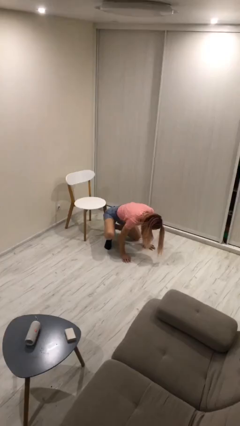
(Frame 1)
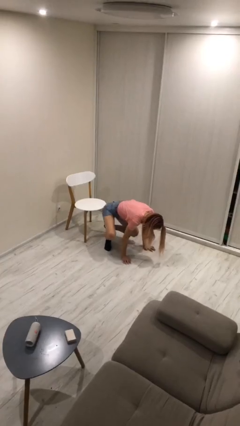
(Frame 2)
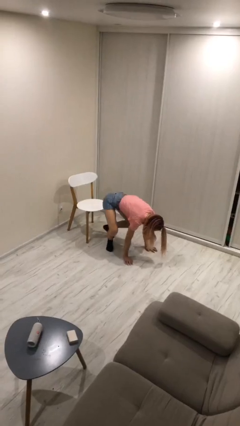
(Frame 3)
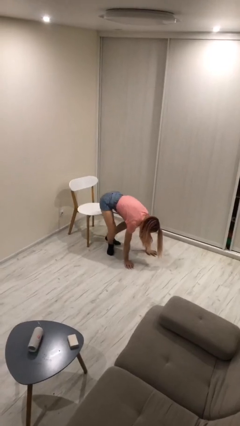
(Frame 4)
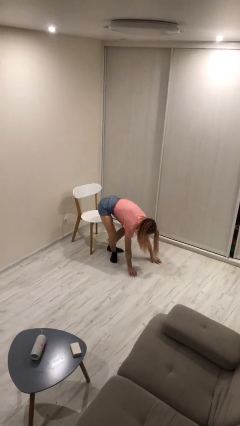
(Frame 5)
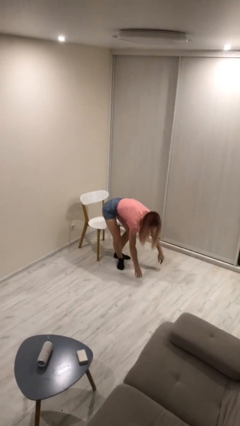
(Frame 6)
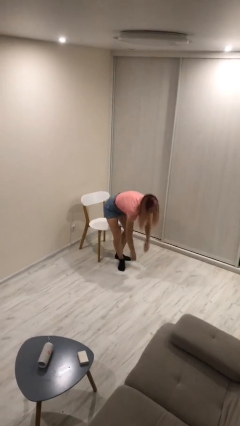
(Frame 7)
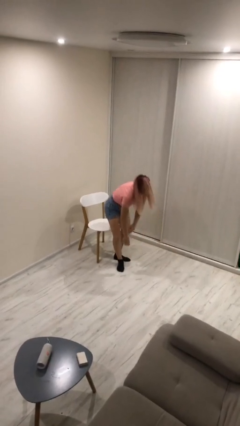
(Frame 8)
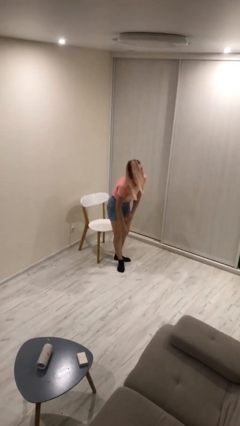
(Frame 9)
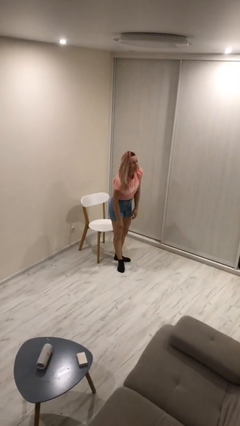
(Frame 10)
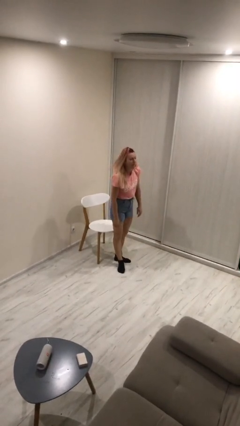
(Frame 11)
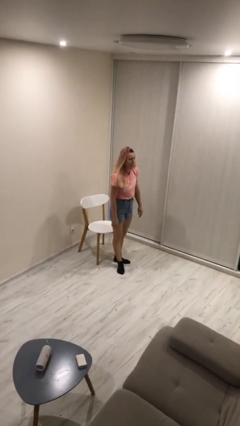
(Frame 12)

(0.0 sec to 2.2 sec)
person stands up from floor

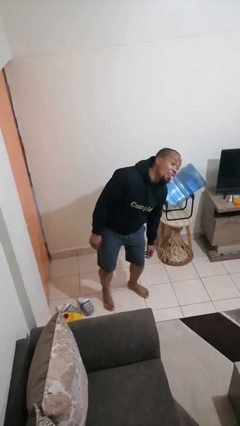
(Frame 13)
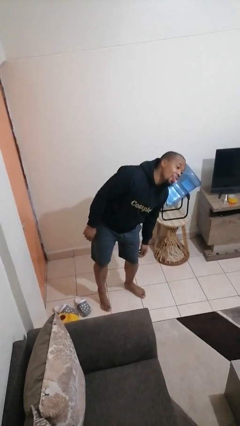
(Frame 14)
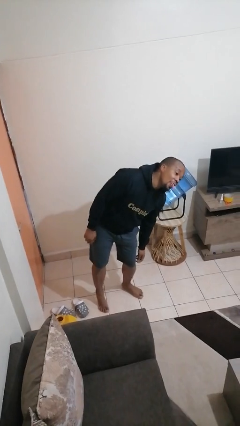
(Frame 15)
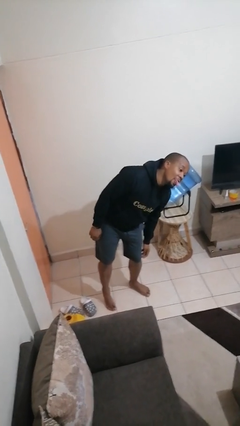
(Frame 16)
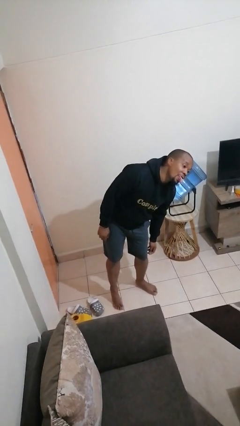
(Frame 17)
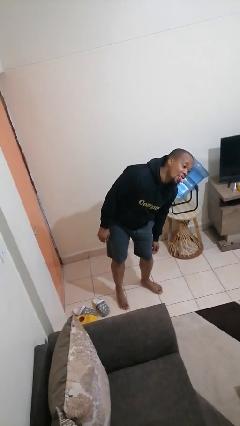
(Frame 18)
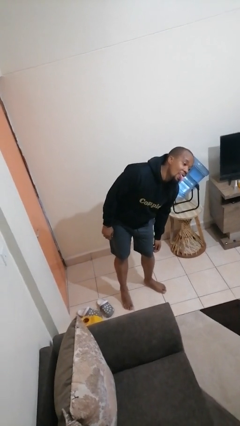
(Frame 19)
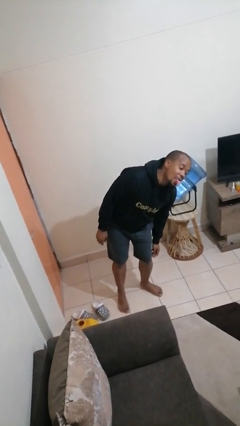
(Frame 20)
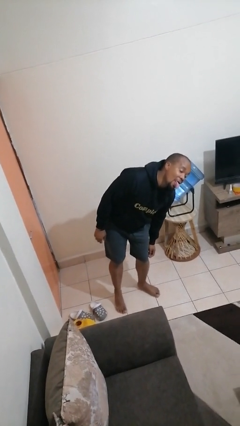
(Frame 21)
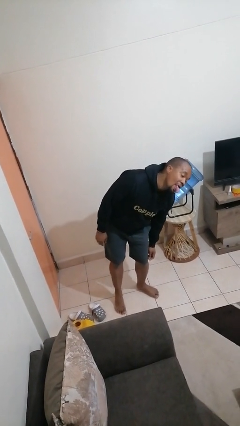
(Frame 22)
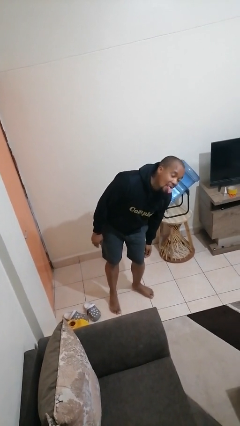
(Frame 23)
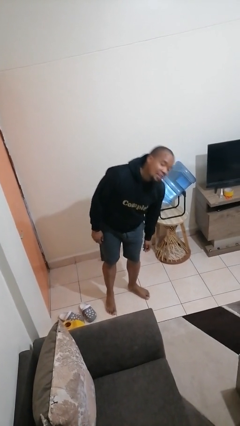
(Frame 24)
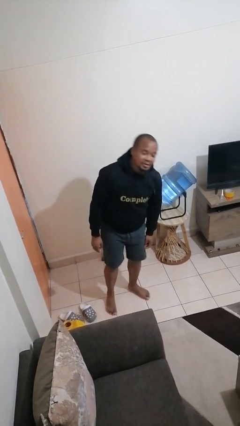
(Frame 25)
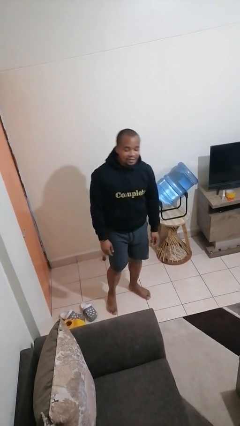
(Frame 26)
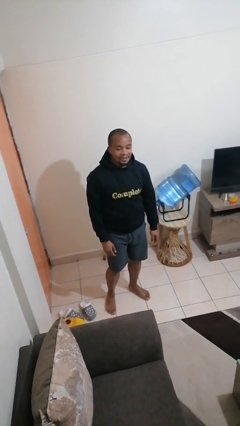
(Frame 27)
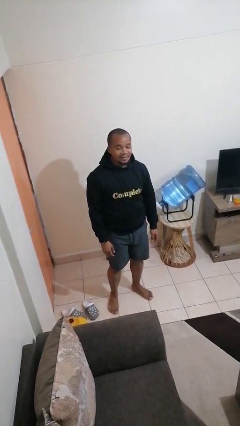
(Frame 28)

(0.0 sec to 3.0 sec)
person sticks out tongue

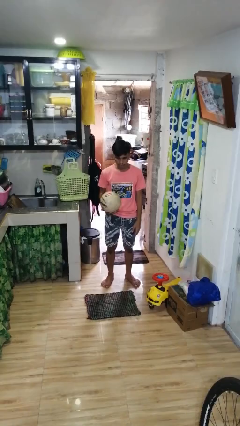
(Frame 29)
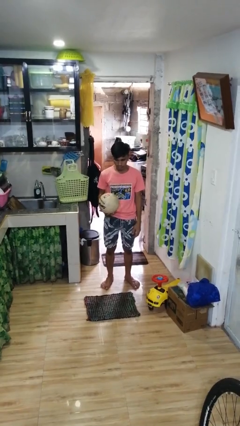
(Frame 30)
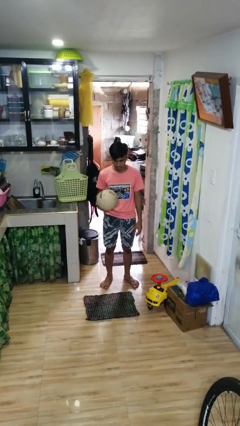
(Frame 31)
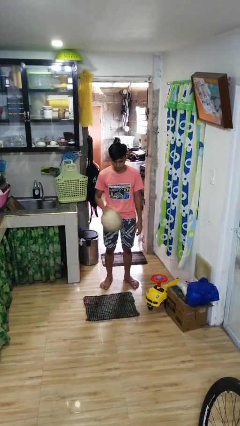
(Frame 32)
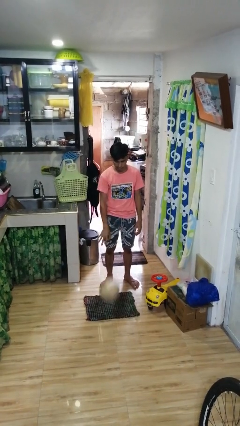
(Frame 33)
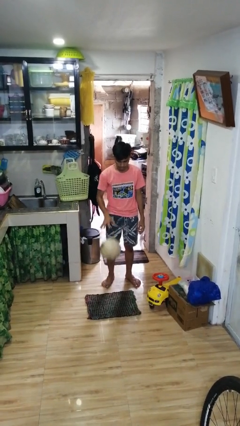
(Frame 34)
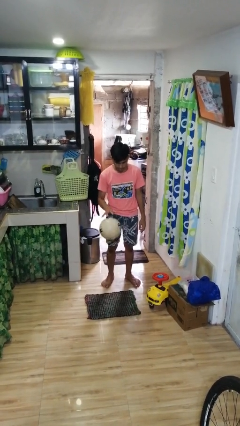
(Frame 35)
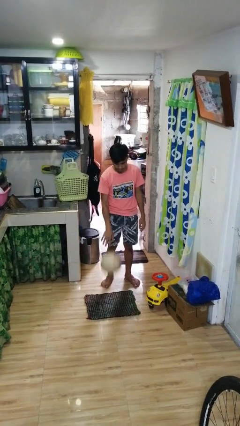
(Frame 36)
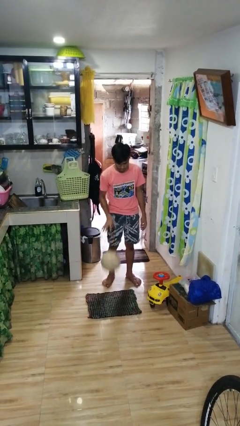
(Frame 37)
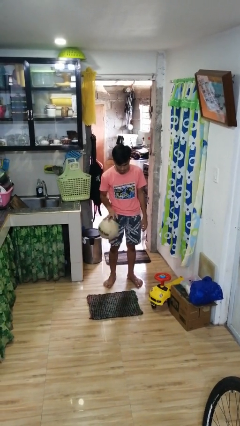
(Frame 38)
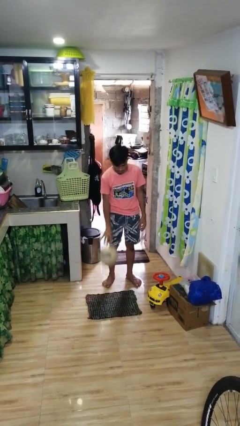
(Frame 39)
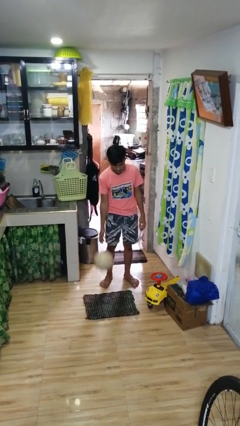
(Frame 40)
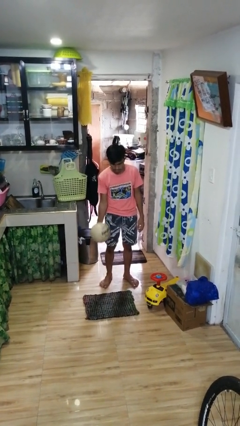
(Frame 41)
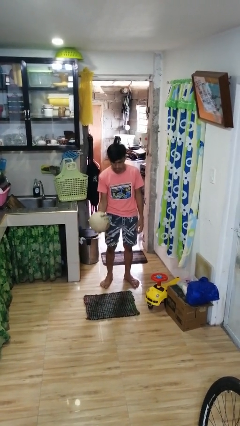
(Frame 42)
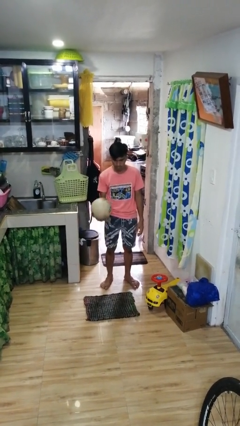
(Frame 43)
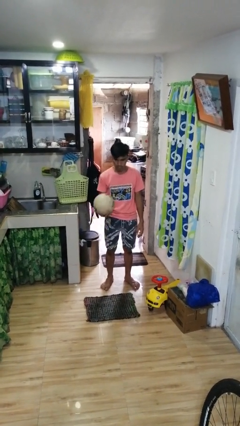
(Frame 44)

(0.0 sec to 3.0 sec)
person bounces ball on floor

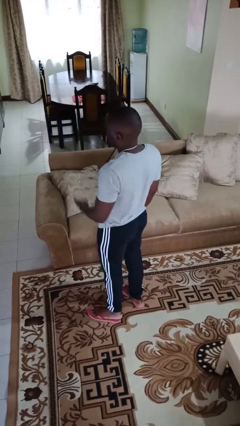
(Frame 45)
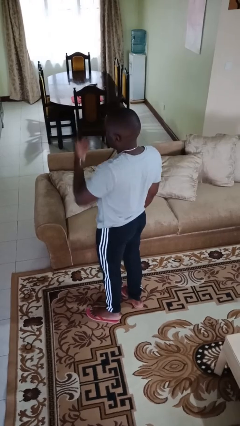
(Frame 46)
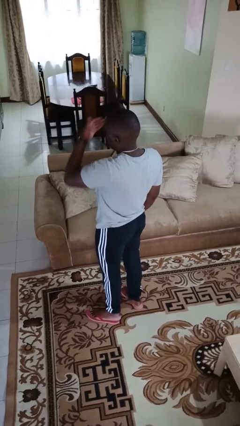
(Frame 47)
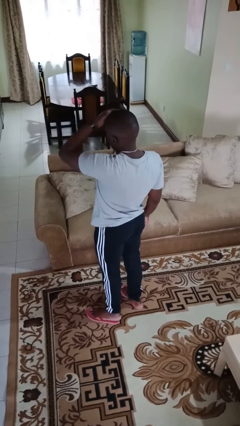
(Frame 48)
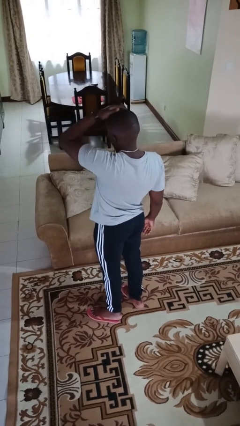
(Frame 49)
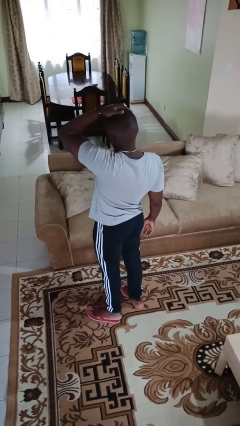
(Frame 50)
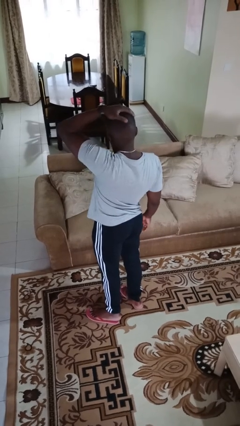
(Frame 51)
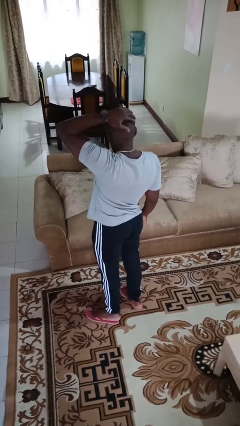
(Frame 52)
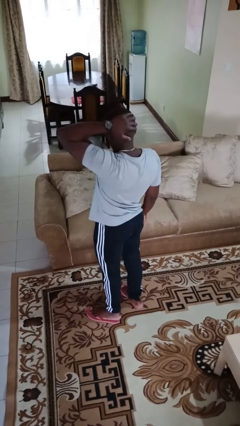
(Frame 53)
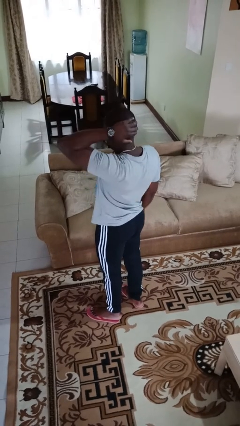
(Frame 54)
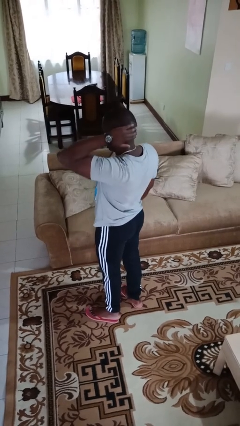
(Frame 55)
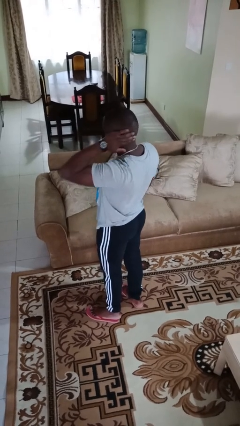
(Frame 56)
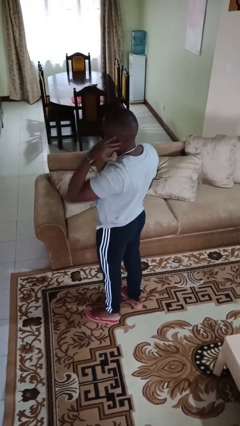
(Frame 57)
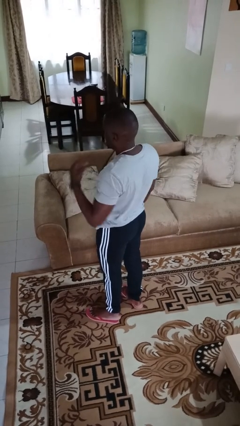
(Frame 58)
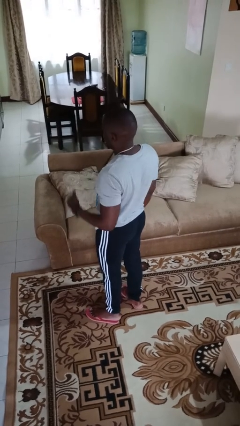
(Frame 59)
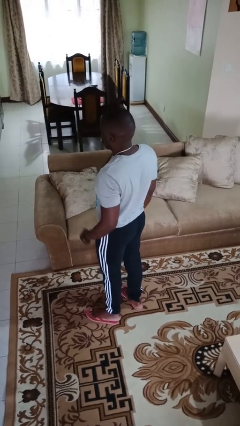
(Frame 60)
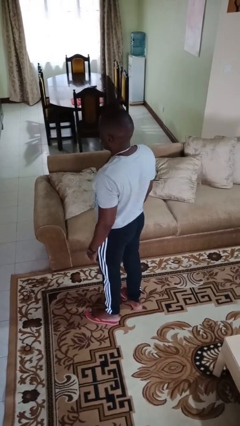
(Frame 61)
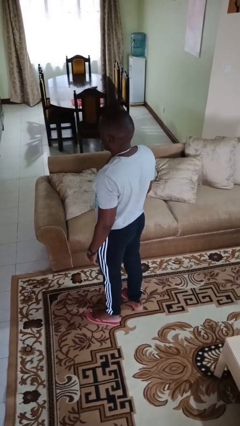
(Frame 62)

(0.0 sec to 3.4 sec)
person strokes hair

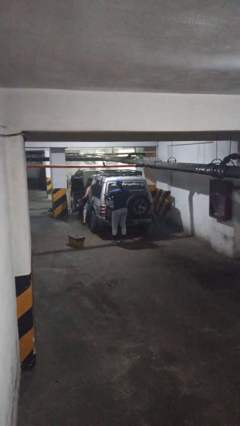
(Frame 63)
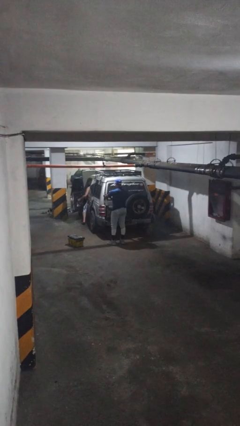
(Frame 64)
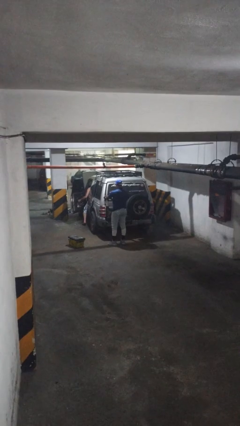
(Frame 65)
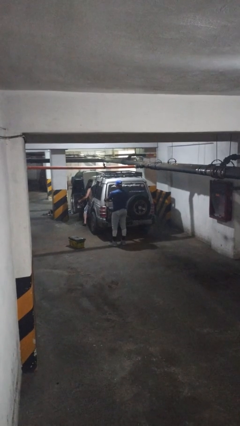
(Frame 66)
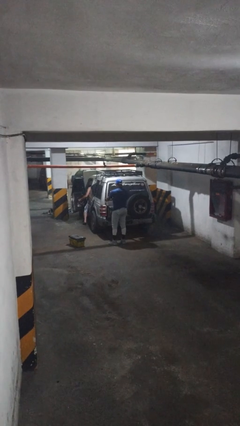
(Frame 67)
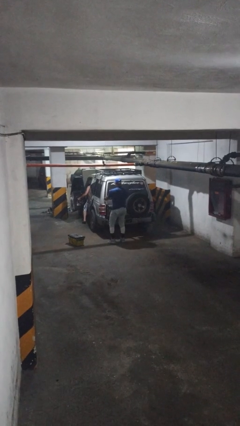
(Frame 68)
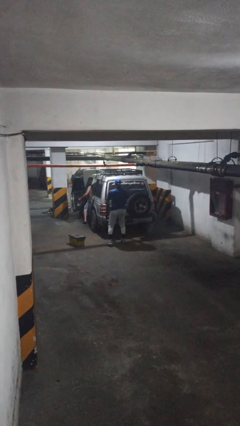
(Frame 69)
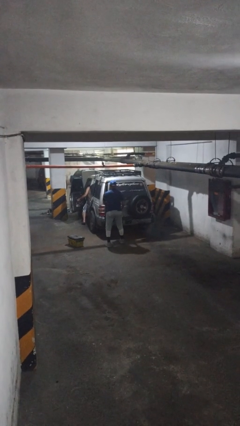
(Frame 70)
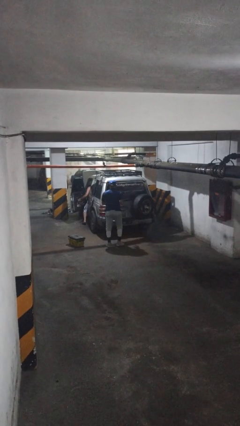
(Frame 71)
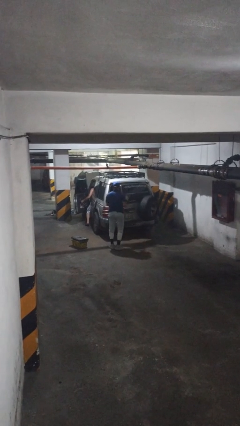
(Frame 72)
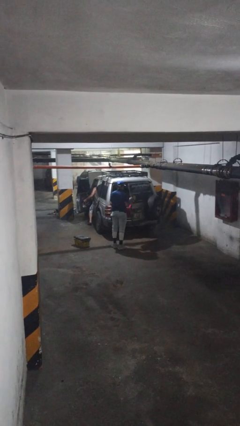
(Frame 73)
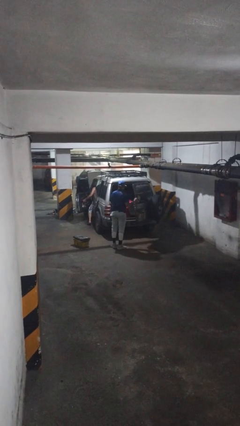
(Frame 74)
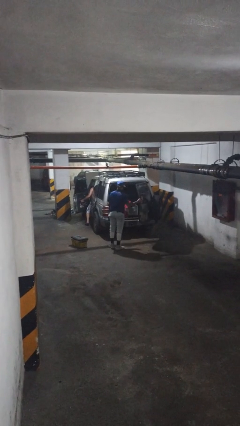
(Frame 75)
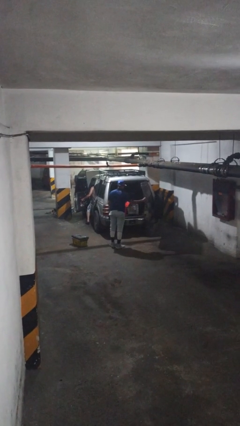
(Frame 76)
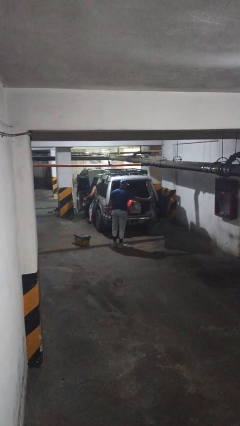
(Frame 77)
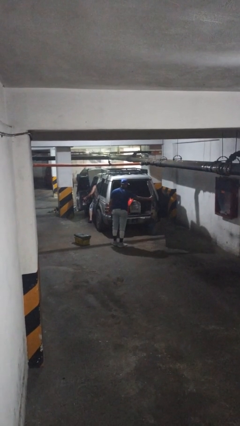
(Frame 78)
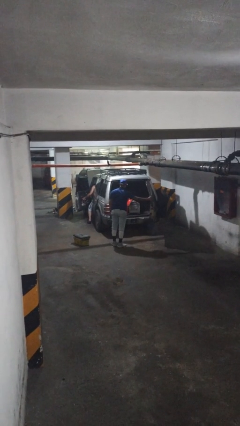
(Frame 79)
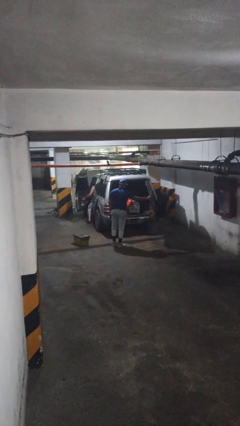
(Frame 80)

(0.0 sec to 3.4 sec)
person opens car trunk

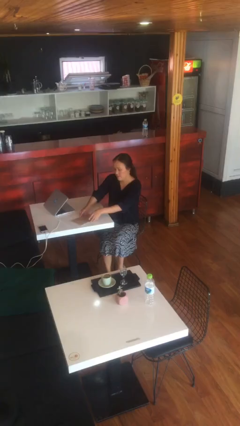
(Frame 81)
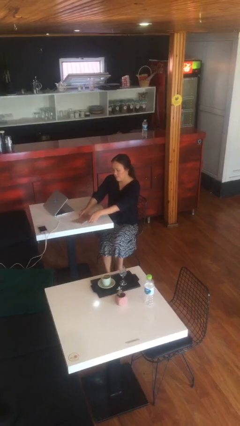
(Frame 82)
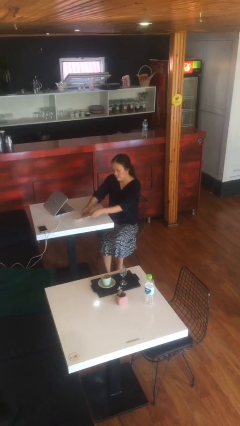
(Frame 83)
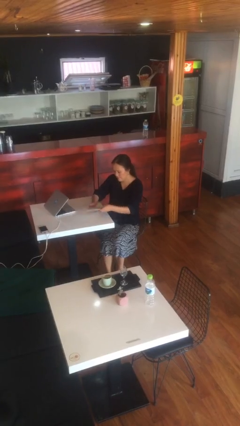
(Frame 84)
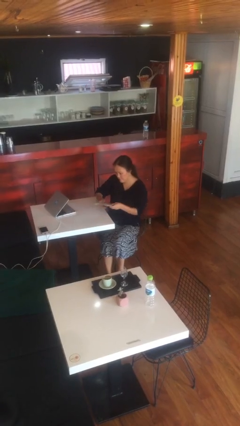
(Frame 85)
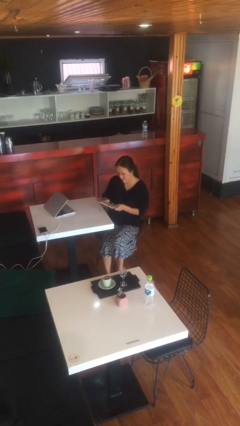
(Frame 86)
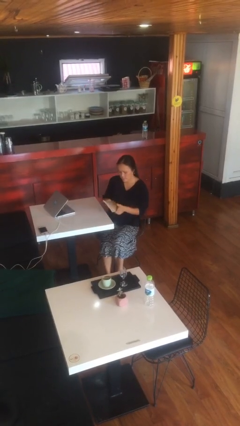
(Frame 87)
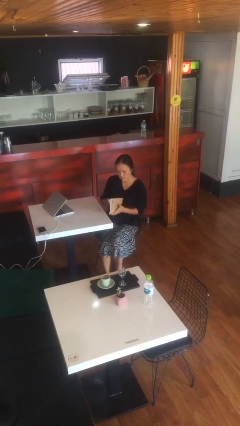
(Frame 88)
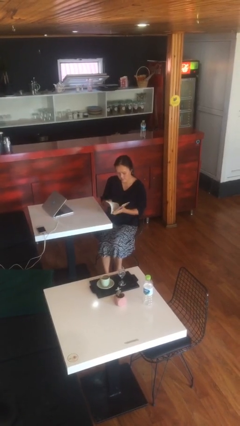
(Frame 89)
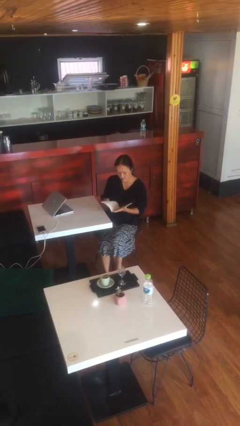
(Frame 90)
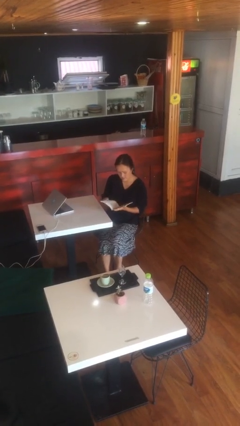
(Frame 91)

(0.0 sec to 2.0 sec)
person picks up object from table
